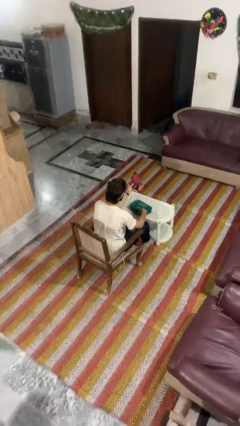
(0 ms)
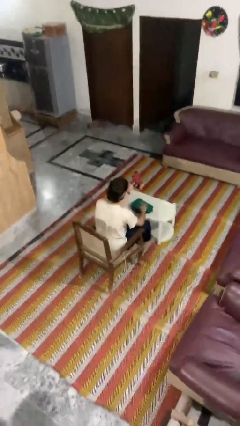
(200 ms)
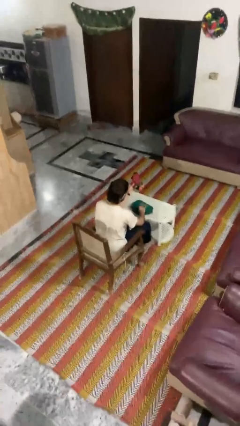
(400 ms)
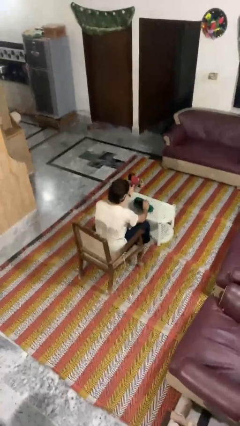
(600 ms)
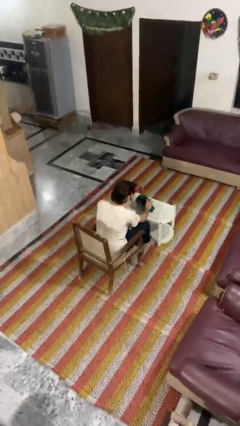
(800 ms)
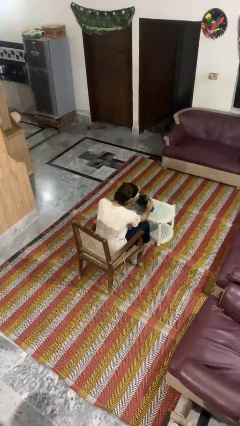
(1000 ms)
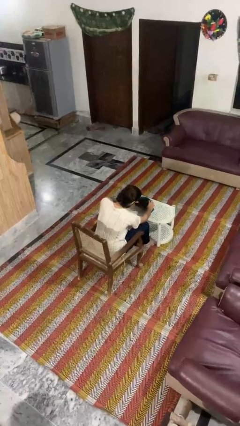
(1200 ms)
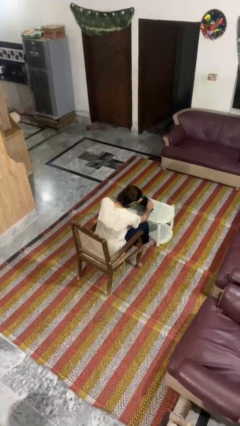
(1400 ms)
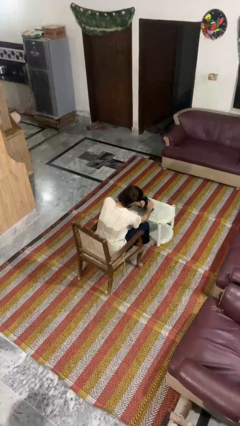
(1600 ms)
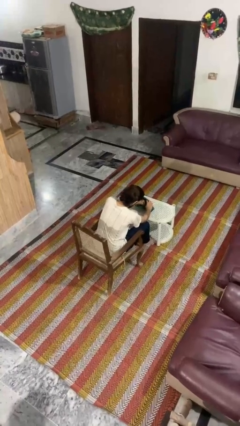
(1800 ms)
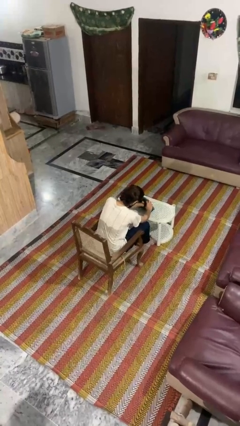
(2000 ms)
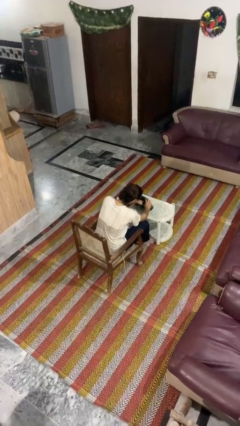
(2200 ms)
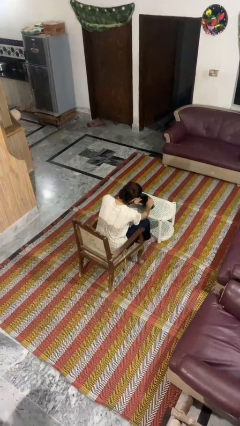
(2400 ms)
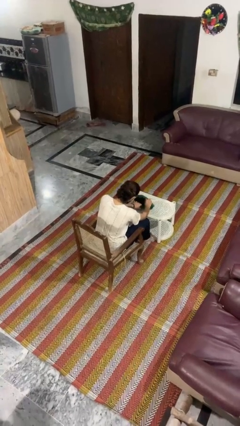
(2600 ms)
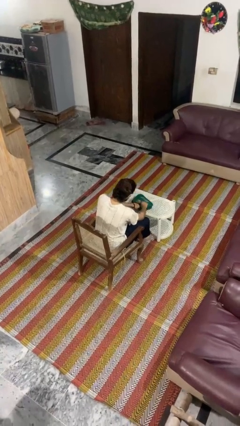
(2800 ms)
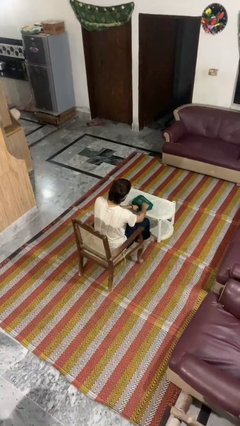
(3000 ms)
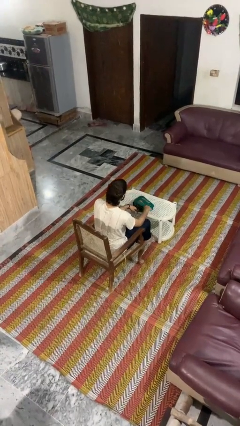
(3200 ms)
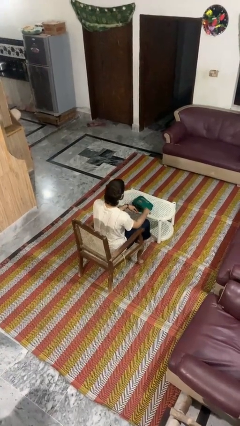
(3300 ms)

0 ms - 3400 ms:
person puts object into purse

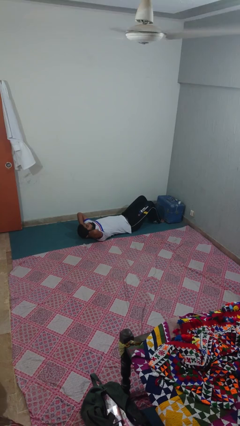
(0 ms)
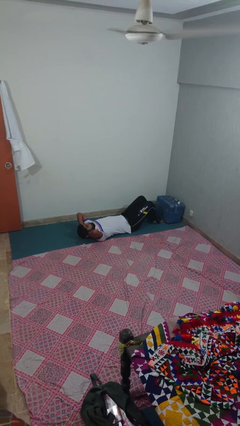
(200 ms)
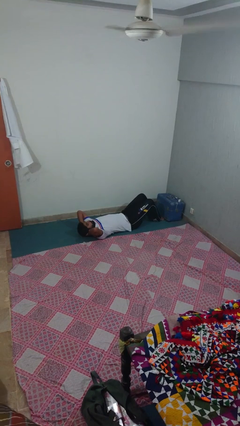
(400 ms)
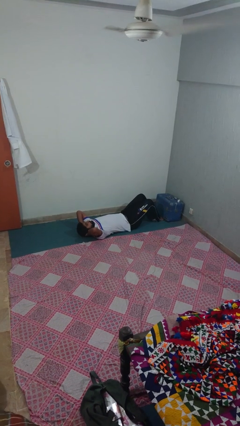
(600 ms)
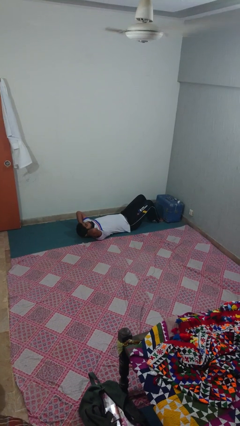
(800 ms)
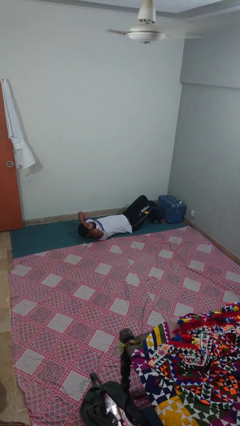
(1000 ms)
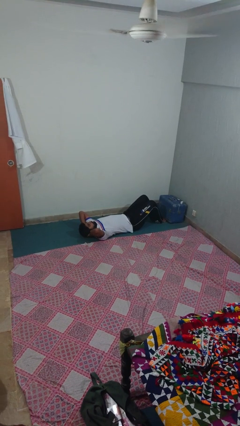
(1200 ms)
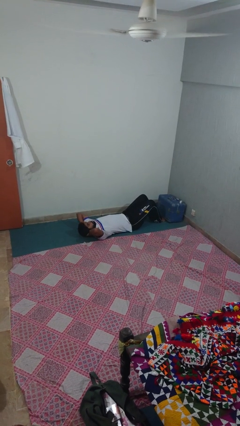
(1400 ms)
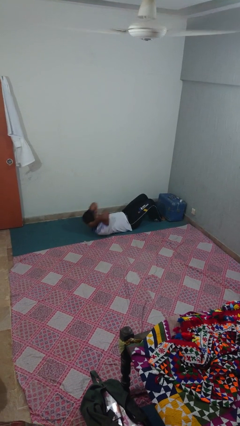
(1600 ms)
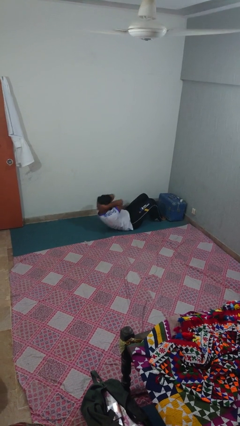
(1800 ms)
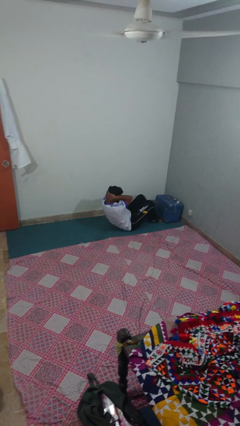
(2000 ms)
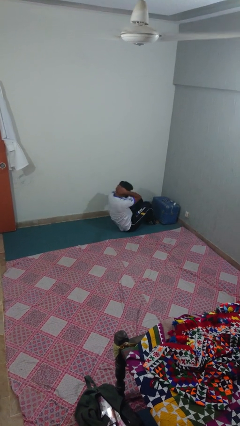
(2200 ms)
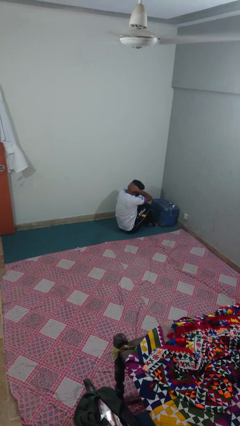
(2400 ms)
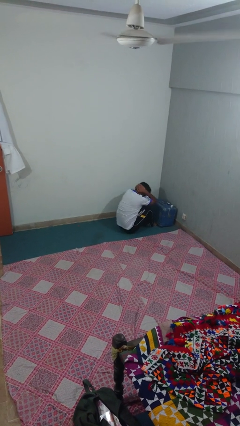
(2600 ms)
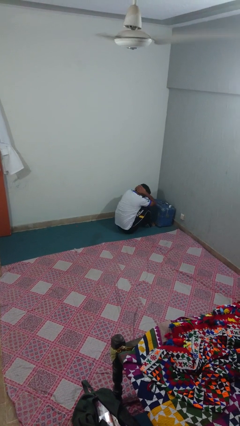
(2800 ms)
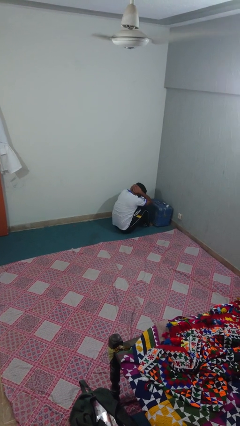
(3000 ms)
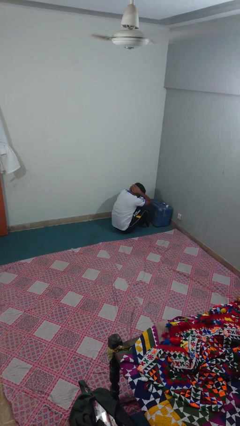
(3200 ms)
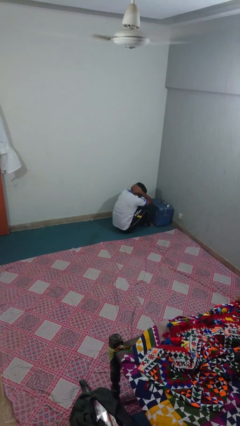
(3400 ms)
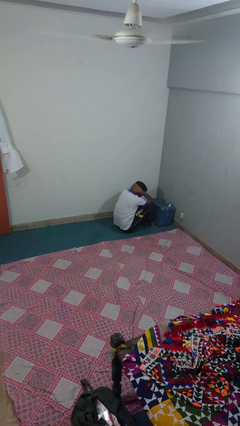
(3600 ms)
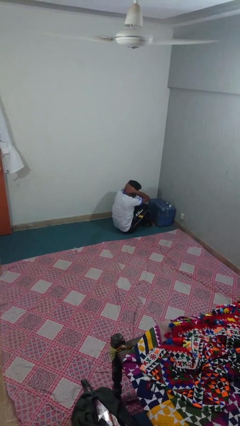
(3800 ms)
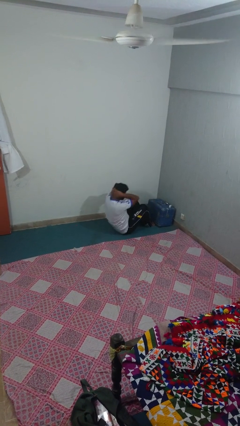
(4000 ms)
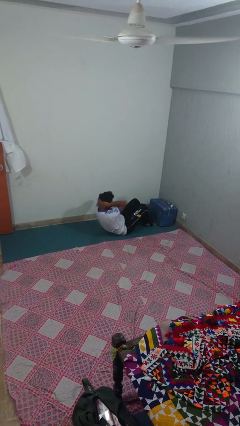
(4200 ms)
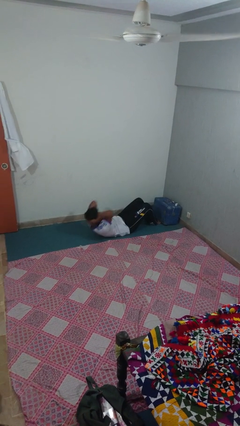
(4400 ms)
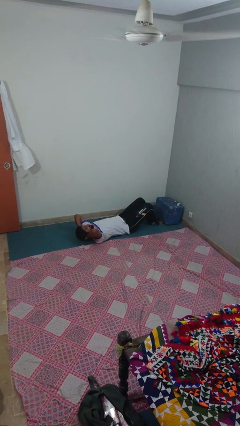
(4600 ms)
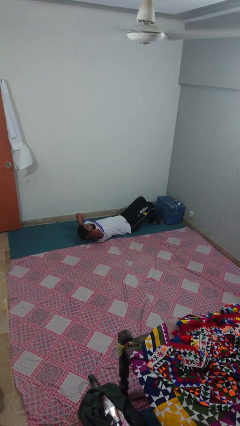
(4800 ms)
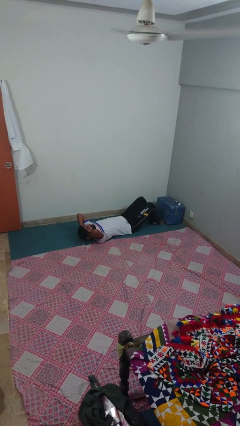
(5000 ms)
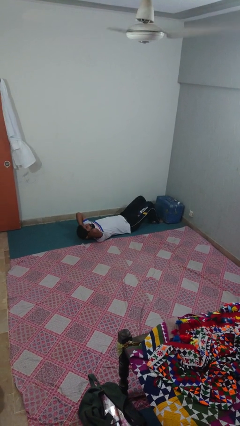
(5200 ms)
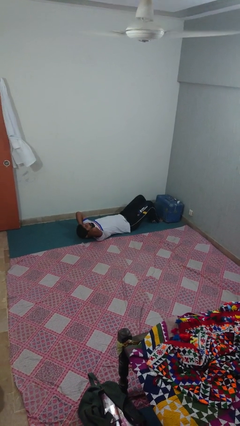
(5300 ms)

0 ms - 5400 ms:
person exercises with situp

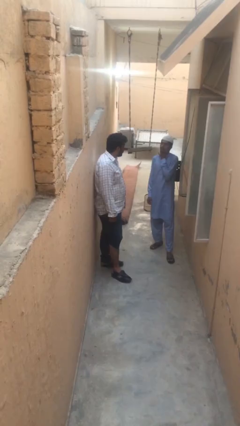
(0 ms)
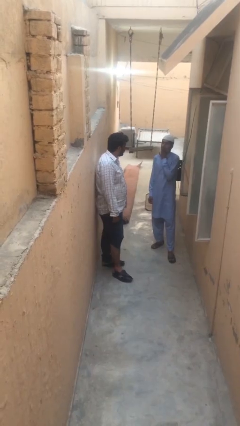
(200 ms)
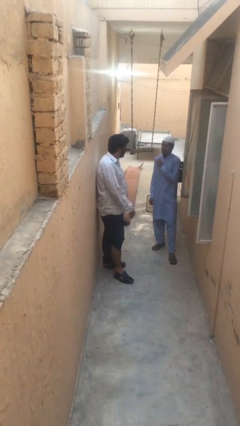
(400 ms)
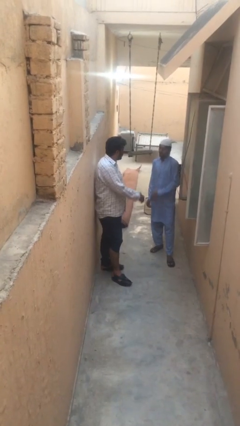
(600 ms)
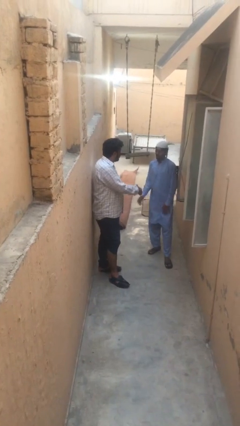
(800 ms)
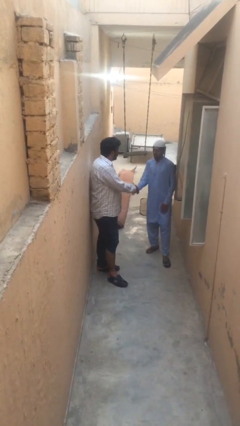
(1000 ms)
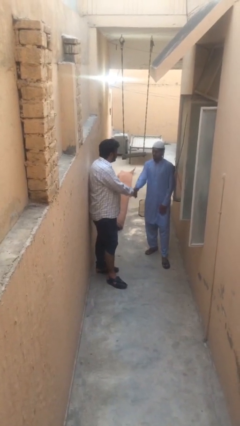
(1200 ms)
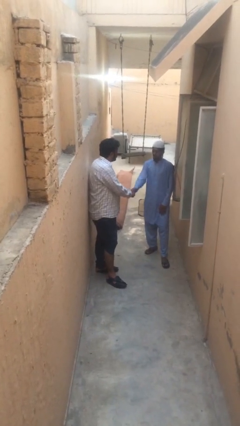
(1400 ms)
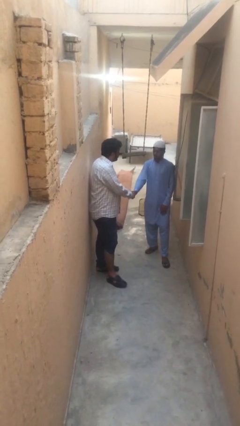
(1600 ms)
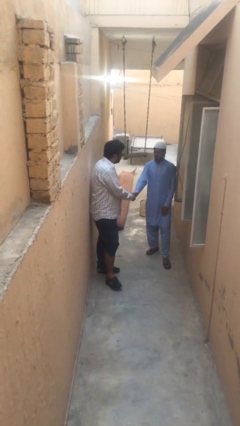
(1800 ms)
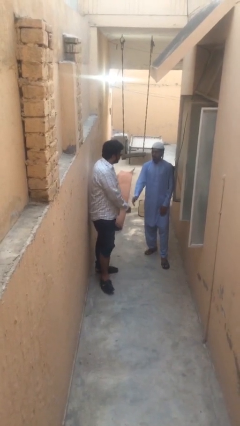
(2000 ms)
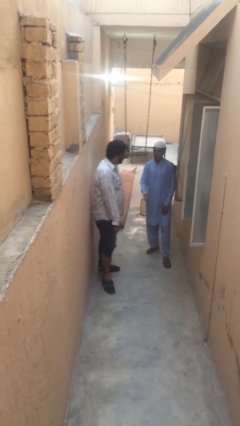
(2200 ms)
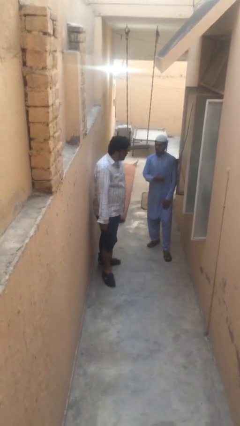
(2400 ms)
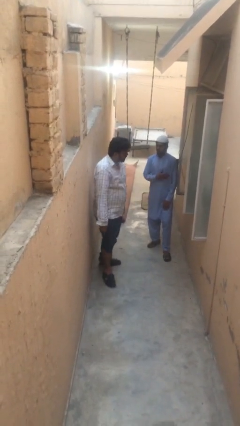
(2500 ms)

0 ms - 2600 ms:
person shakes hand

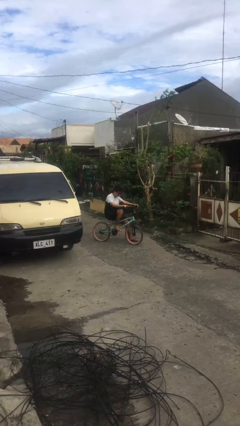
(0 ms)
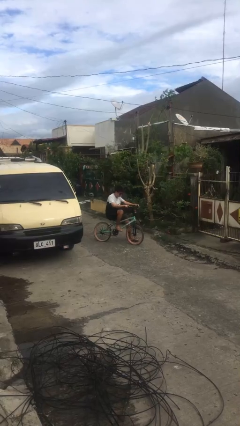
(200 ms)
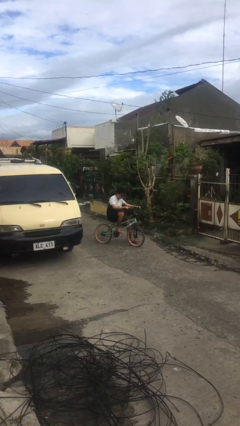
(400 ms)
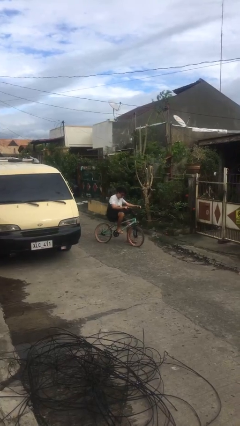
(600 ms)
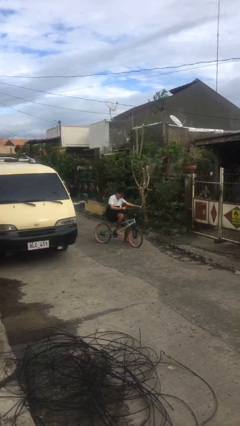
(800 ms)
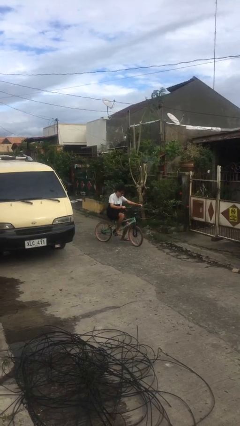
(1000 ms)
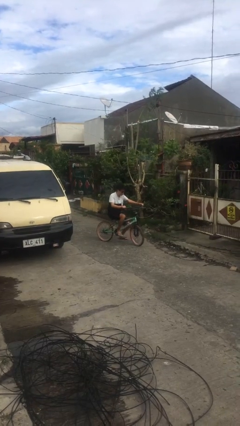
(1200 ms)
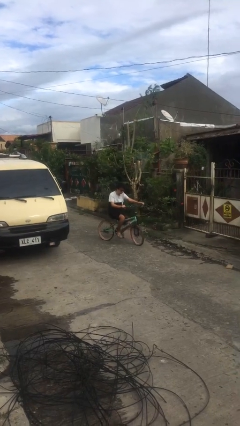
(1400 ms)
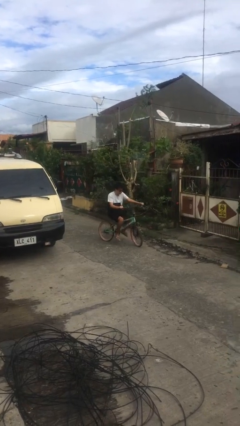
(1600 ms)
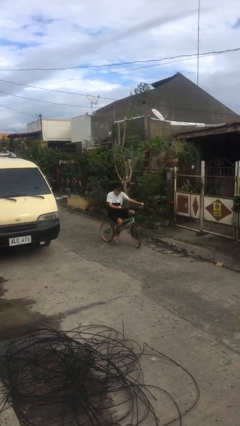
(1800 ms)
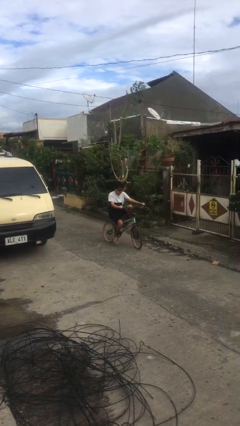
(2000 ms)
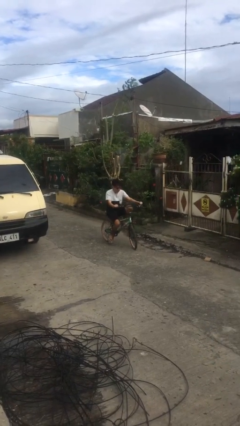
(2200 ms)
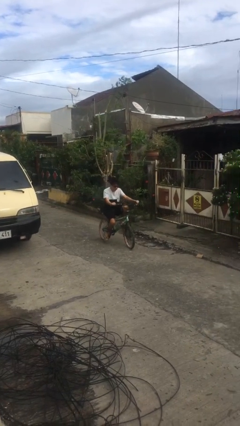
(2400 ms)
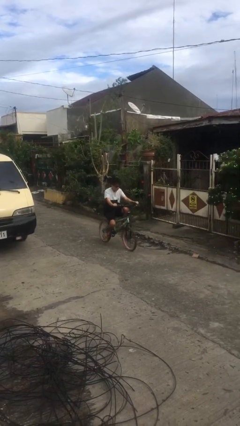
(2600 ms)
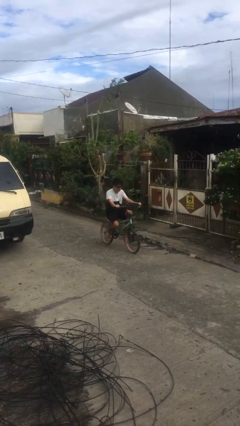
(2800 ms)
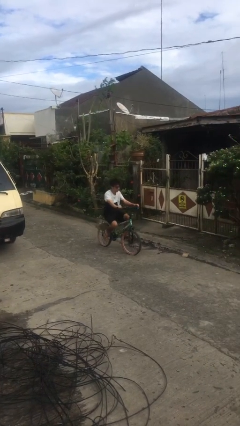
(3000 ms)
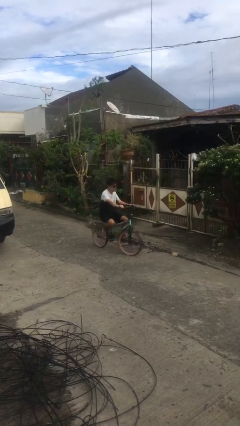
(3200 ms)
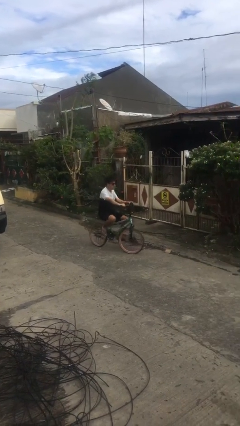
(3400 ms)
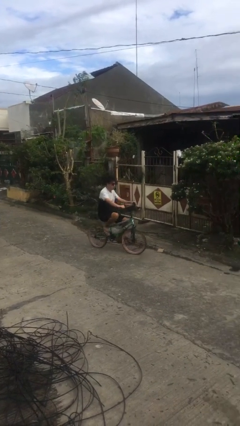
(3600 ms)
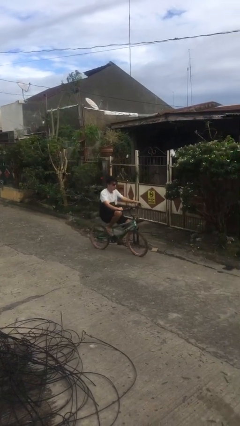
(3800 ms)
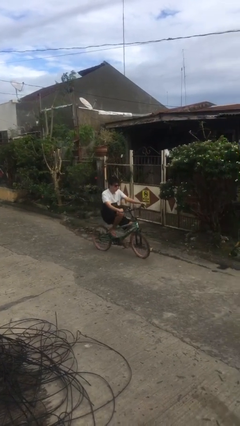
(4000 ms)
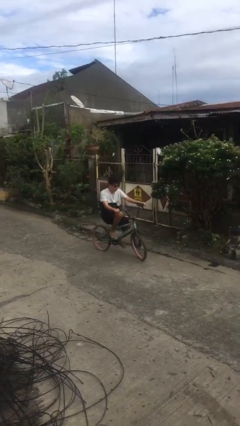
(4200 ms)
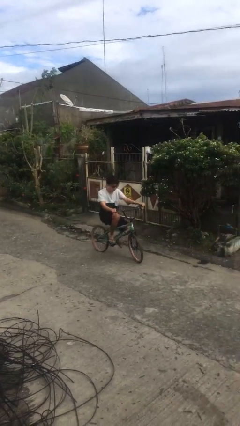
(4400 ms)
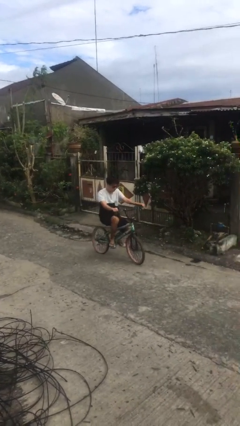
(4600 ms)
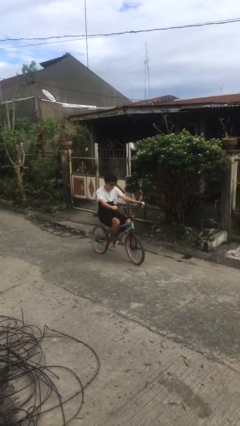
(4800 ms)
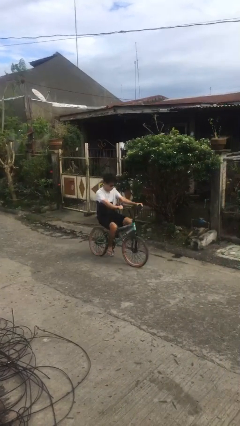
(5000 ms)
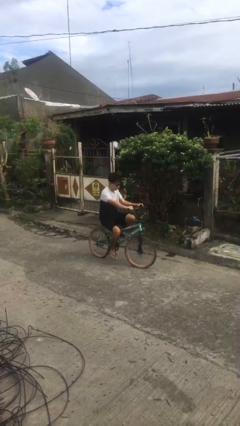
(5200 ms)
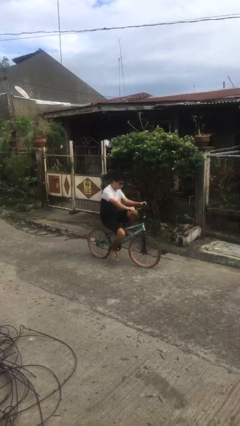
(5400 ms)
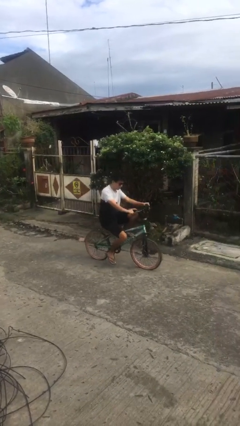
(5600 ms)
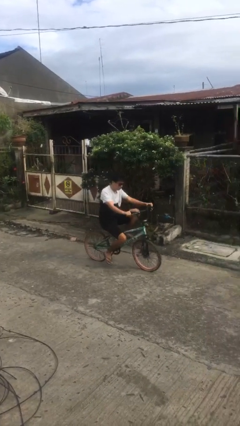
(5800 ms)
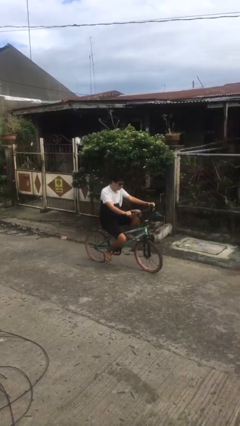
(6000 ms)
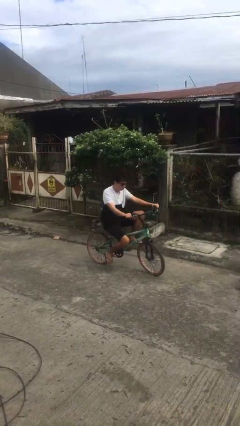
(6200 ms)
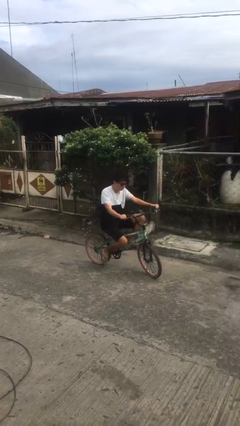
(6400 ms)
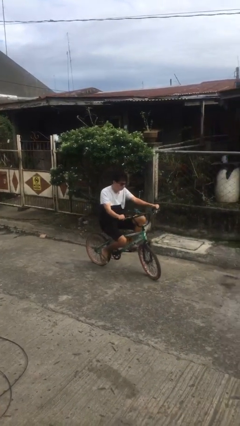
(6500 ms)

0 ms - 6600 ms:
person rides bicycle
